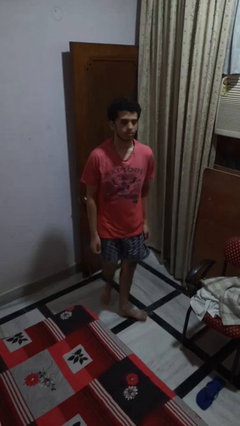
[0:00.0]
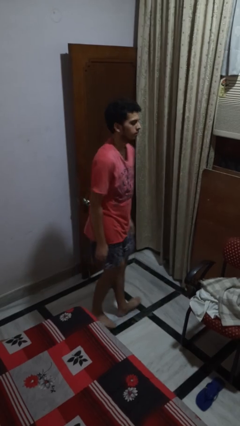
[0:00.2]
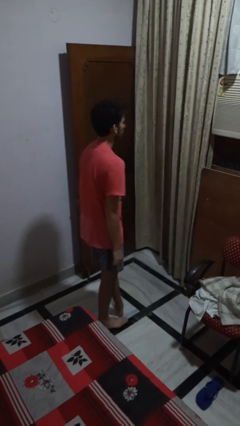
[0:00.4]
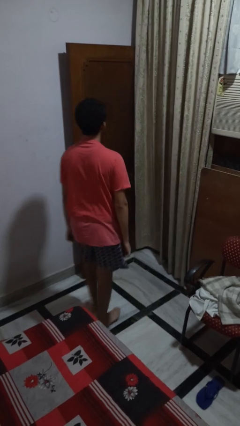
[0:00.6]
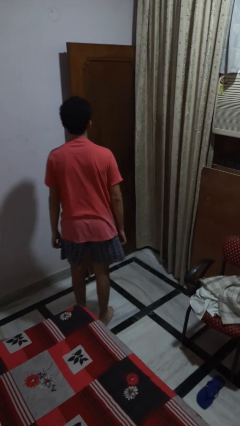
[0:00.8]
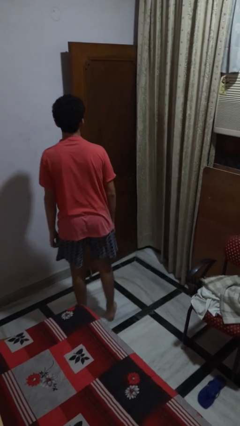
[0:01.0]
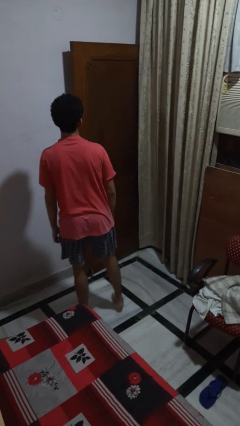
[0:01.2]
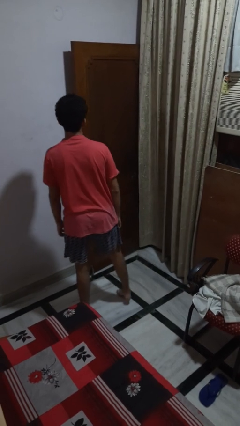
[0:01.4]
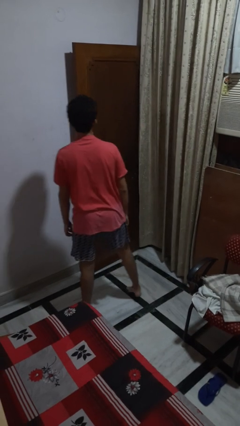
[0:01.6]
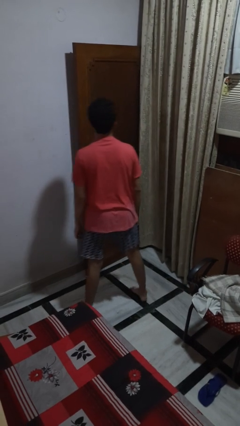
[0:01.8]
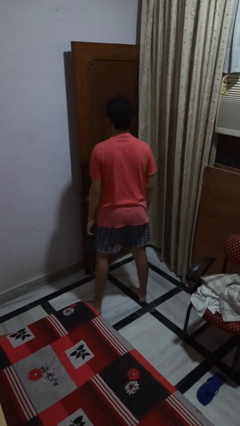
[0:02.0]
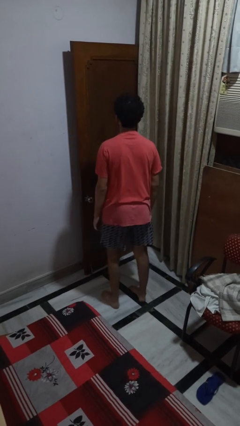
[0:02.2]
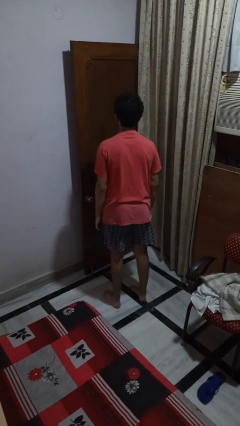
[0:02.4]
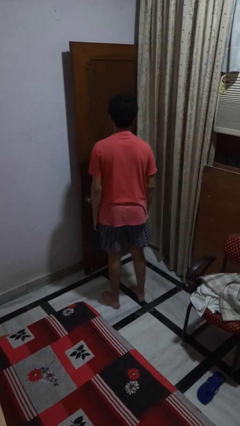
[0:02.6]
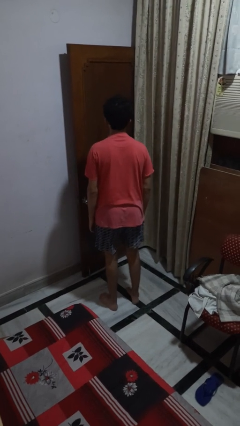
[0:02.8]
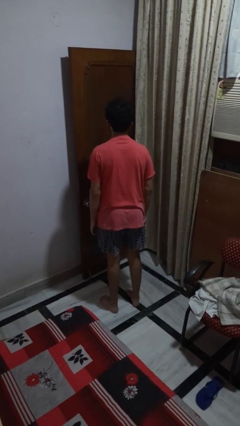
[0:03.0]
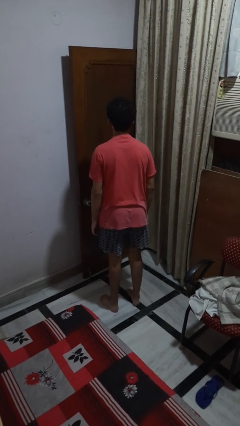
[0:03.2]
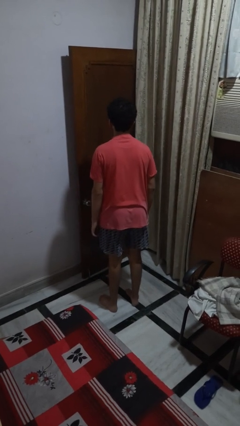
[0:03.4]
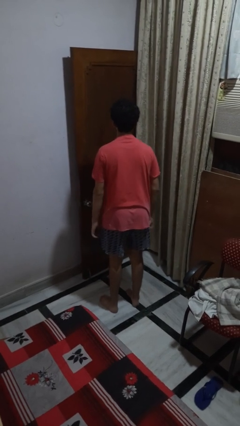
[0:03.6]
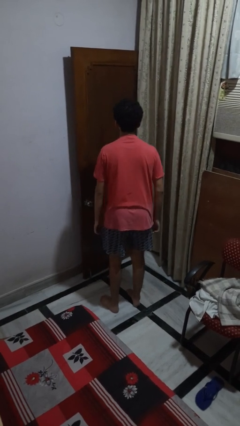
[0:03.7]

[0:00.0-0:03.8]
person twirls

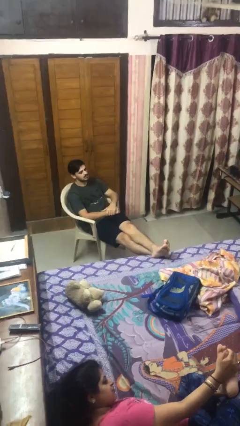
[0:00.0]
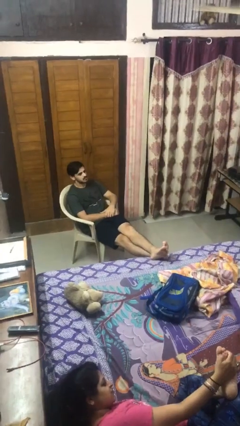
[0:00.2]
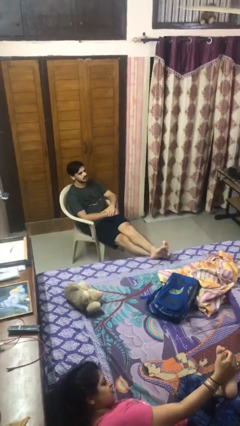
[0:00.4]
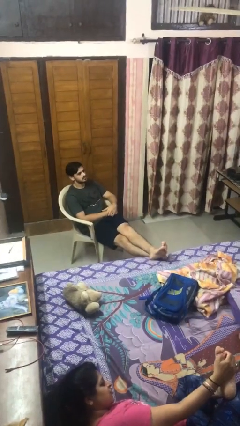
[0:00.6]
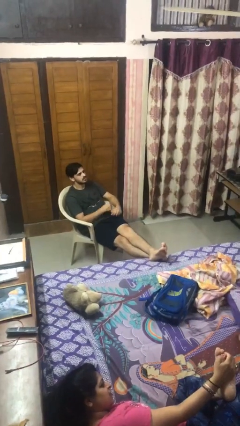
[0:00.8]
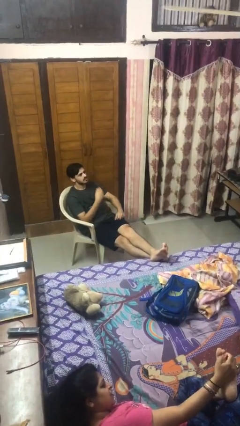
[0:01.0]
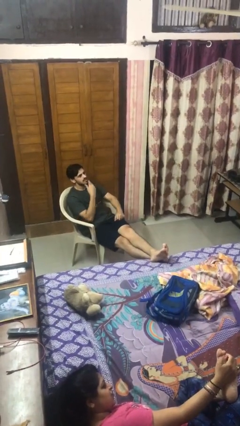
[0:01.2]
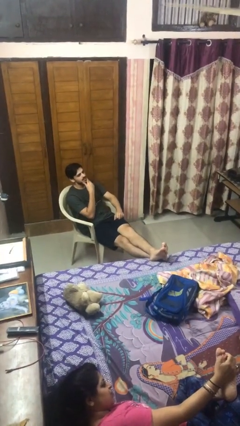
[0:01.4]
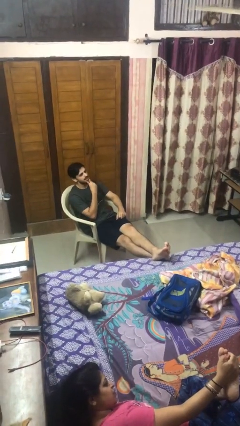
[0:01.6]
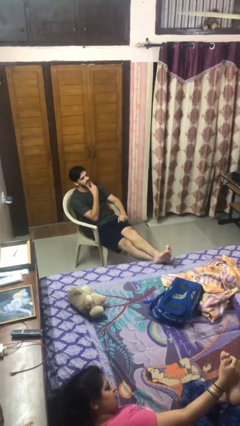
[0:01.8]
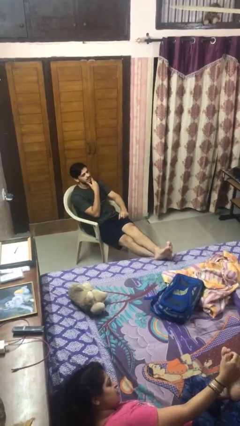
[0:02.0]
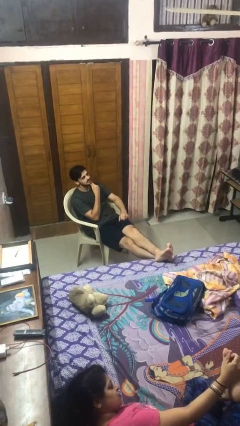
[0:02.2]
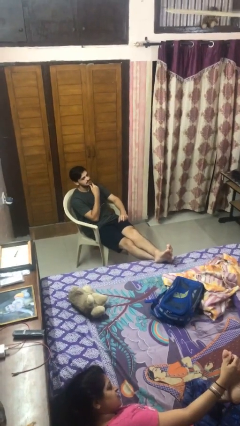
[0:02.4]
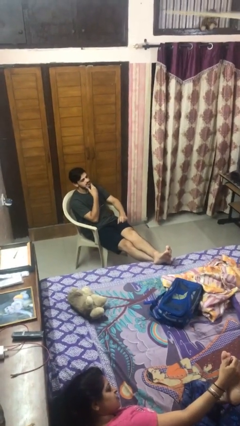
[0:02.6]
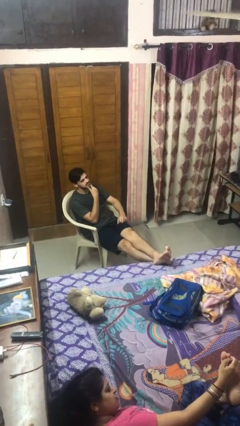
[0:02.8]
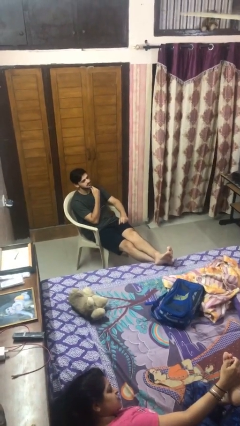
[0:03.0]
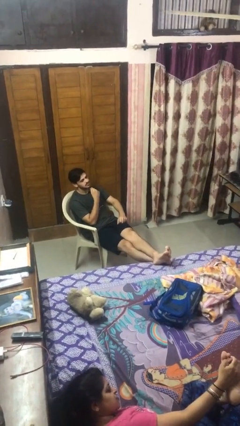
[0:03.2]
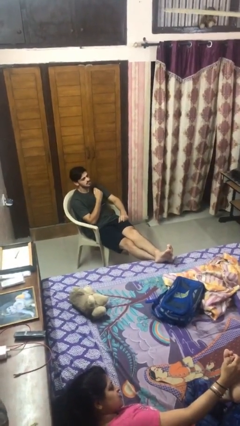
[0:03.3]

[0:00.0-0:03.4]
person strokes chin

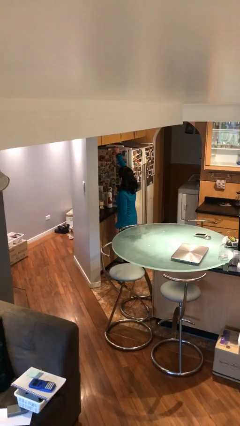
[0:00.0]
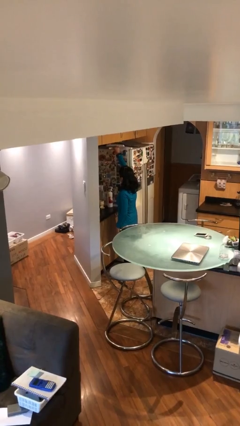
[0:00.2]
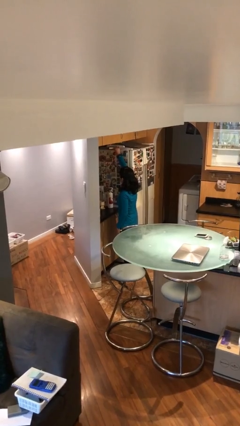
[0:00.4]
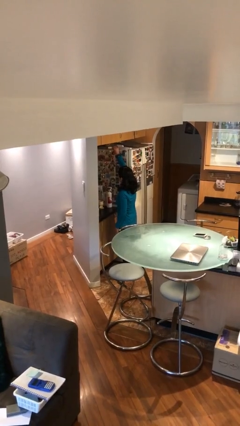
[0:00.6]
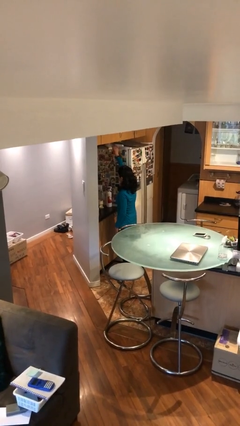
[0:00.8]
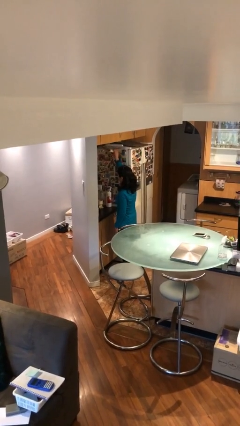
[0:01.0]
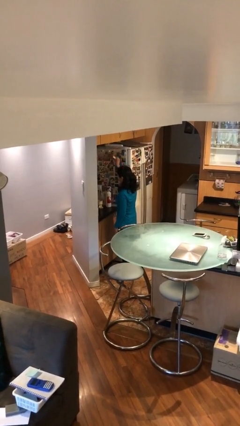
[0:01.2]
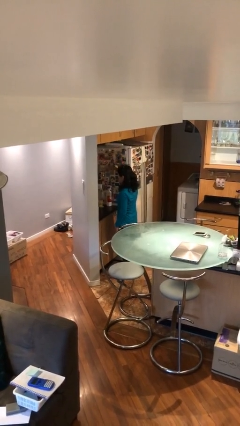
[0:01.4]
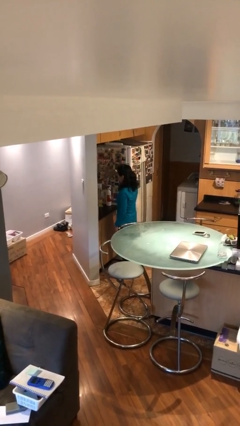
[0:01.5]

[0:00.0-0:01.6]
person picks up object from shelf

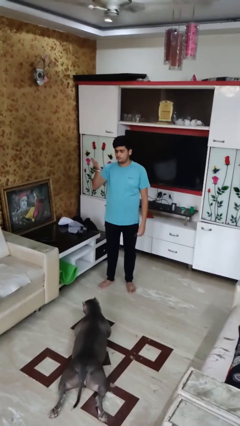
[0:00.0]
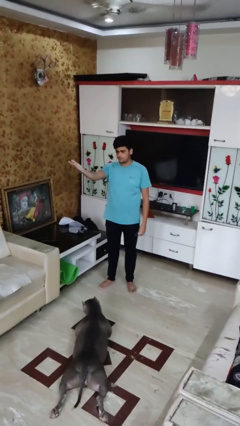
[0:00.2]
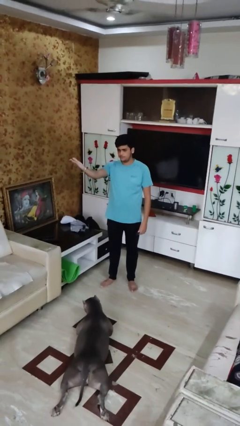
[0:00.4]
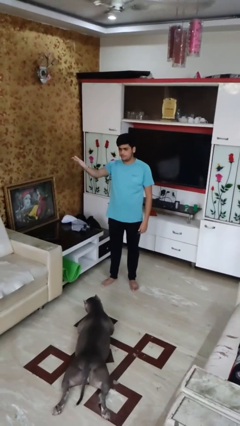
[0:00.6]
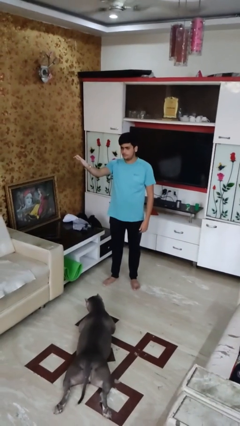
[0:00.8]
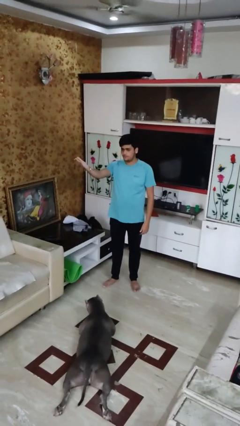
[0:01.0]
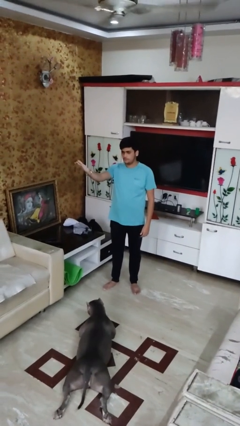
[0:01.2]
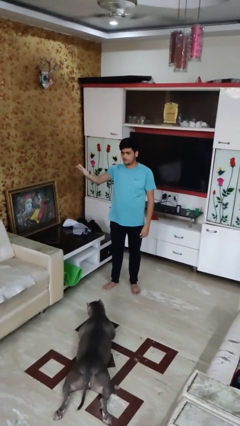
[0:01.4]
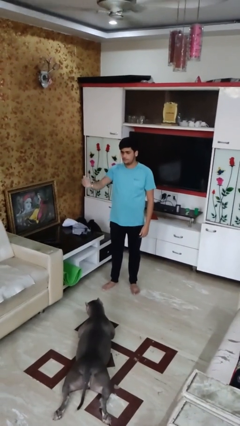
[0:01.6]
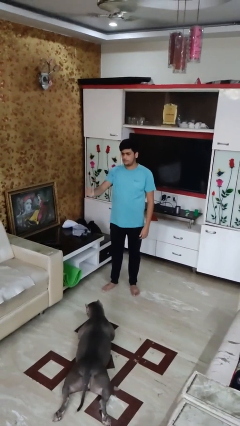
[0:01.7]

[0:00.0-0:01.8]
person gestures blow kiss

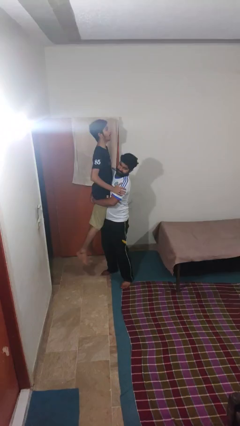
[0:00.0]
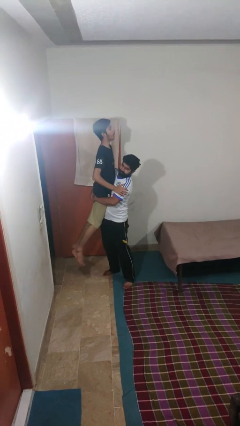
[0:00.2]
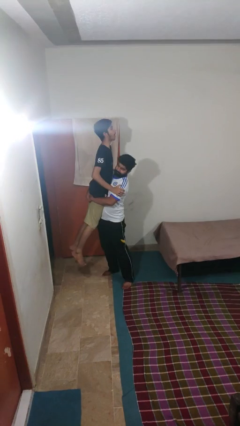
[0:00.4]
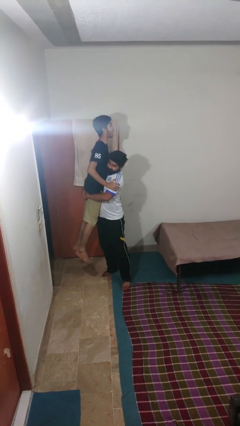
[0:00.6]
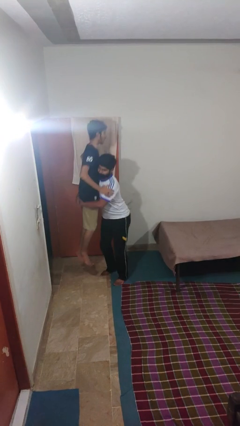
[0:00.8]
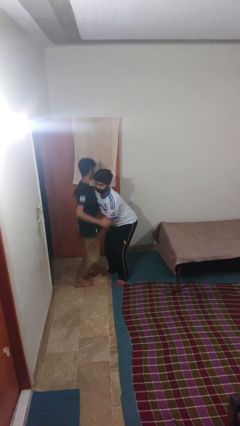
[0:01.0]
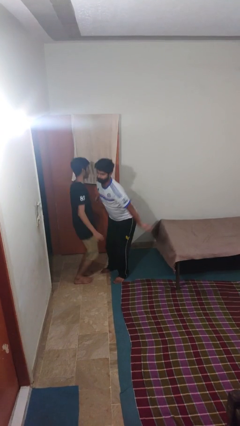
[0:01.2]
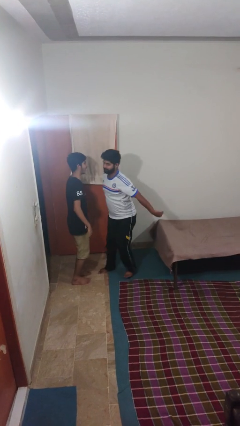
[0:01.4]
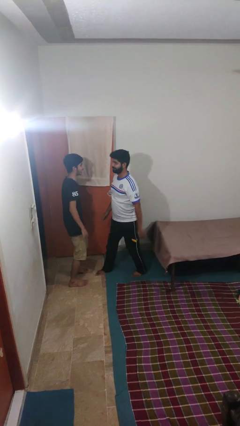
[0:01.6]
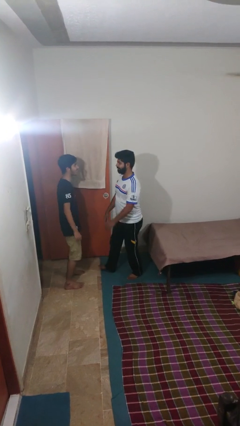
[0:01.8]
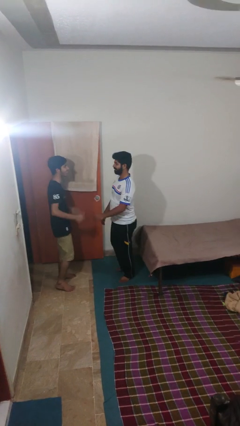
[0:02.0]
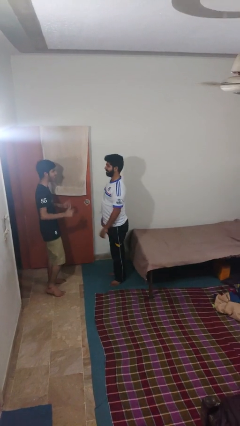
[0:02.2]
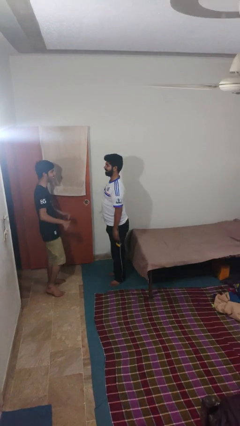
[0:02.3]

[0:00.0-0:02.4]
person puts down person

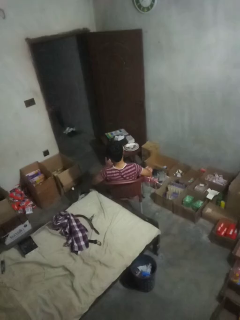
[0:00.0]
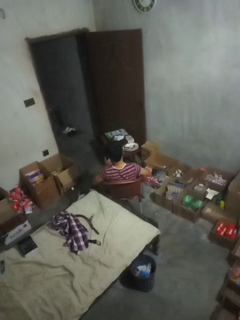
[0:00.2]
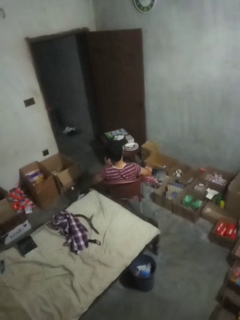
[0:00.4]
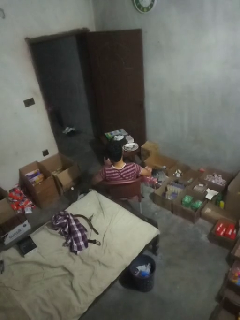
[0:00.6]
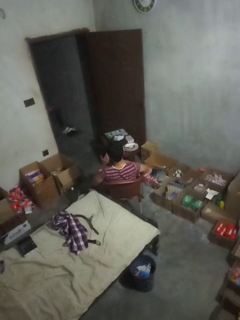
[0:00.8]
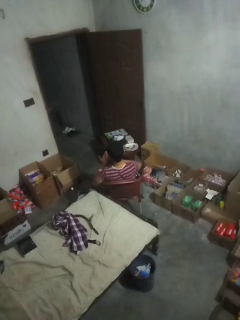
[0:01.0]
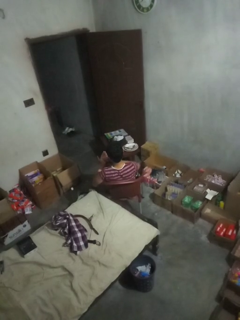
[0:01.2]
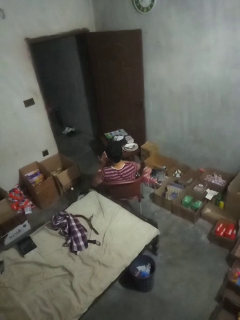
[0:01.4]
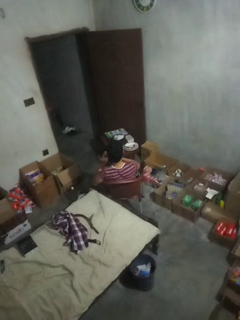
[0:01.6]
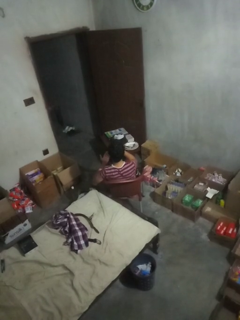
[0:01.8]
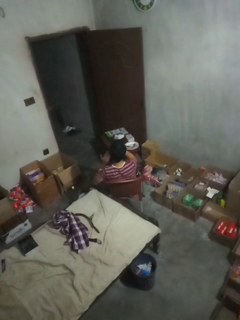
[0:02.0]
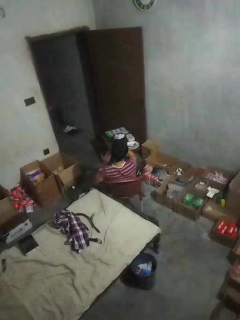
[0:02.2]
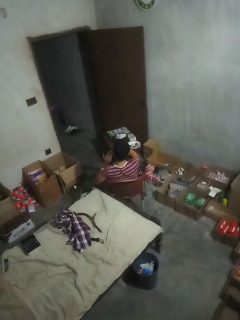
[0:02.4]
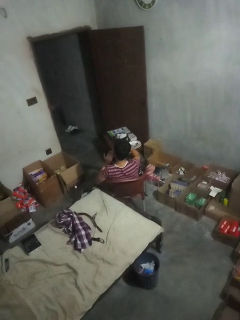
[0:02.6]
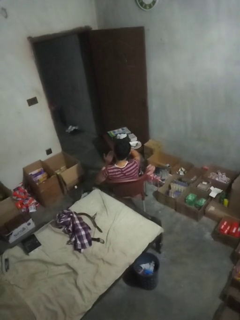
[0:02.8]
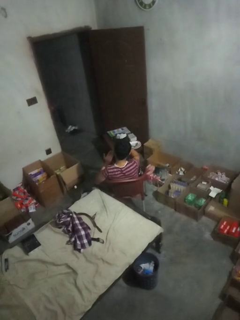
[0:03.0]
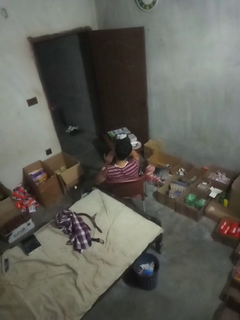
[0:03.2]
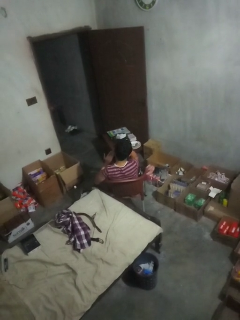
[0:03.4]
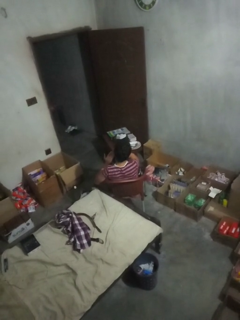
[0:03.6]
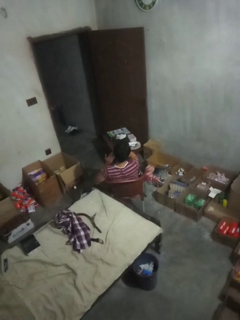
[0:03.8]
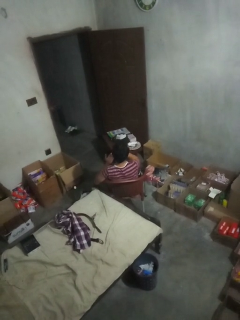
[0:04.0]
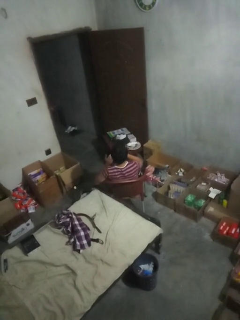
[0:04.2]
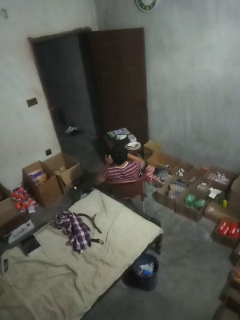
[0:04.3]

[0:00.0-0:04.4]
person applies facial moisturizer

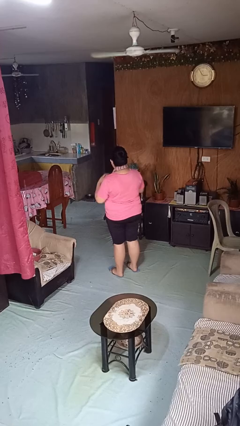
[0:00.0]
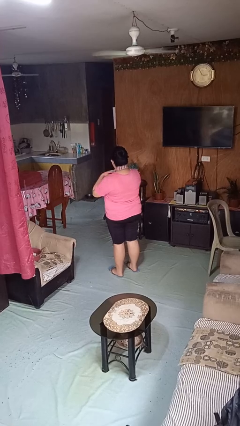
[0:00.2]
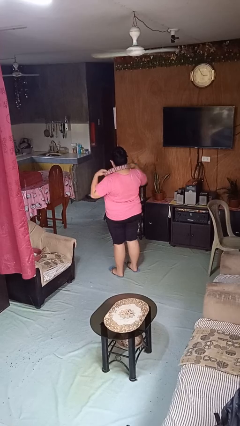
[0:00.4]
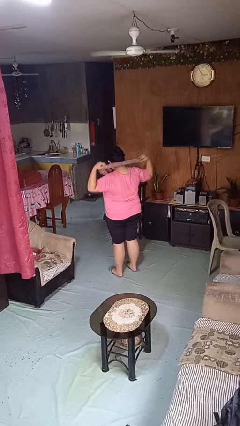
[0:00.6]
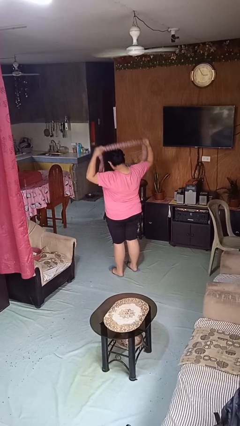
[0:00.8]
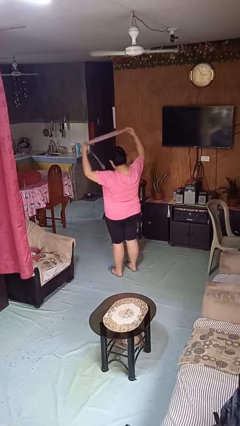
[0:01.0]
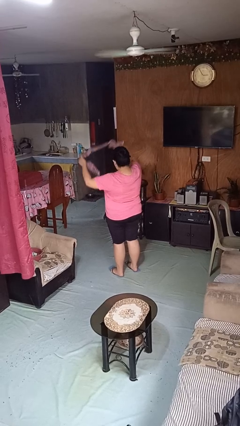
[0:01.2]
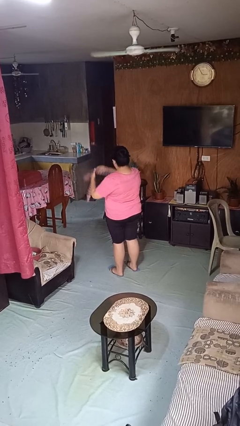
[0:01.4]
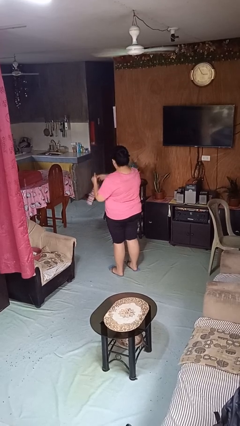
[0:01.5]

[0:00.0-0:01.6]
person takes off necktie
